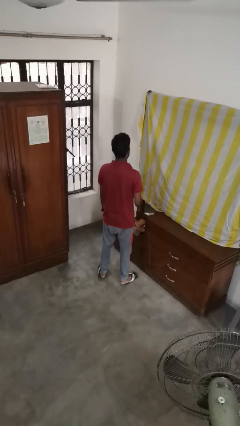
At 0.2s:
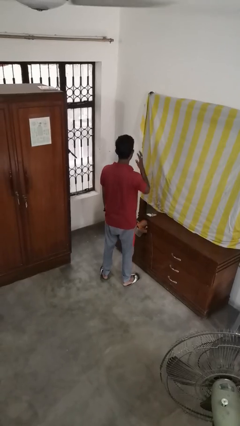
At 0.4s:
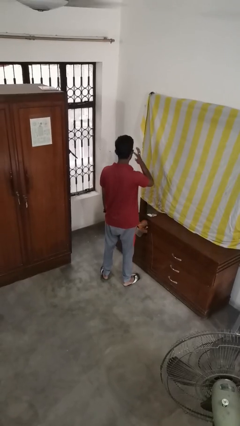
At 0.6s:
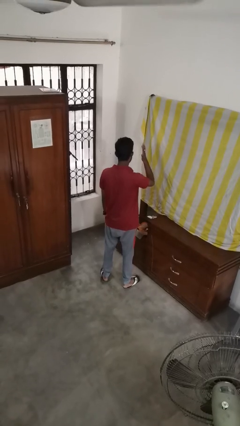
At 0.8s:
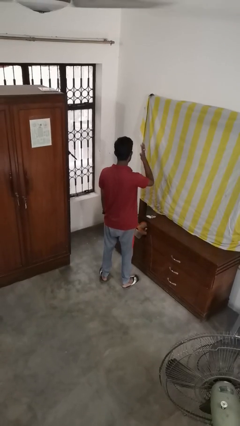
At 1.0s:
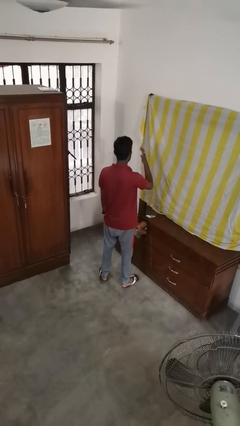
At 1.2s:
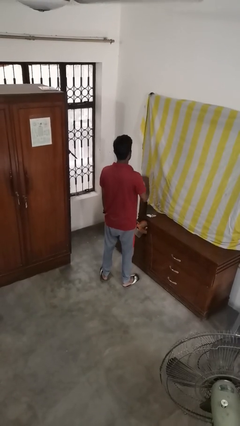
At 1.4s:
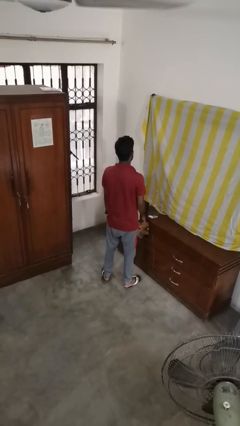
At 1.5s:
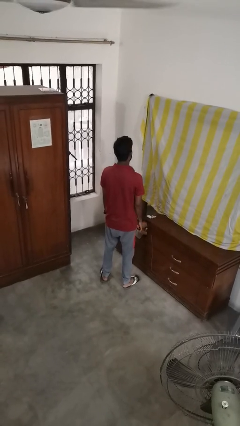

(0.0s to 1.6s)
person puts fingers in ear

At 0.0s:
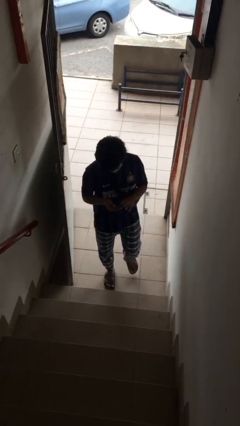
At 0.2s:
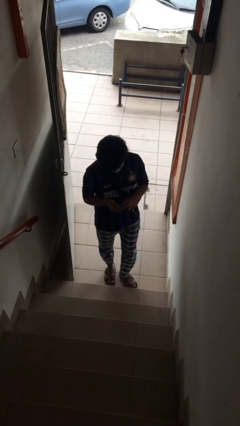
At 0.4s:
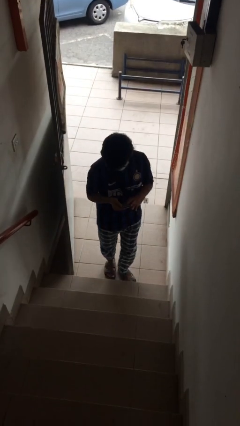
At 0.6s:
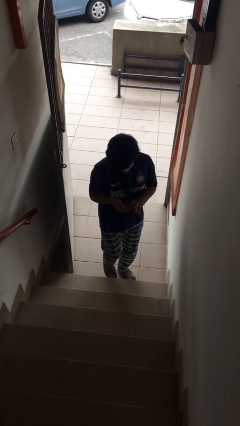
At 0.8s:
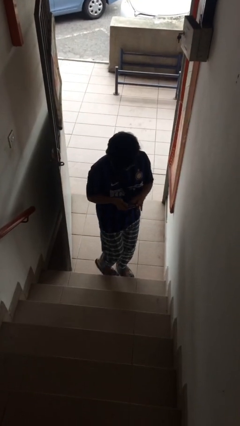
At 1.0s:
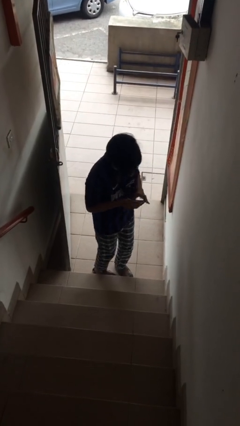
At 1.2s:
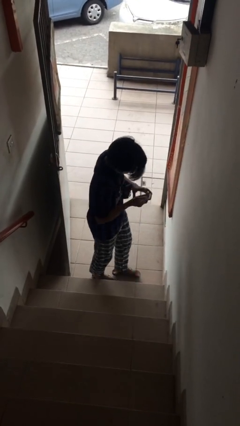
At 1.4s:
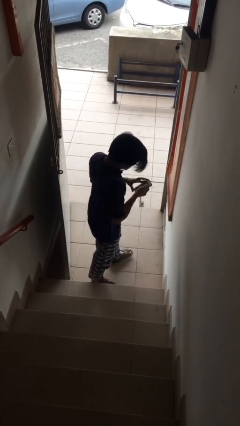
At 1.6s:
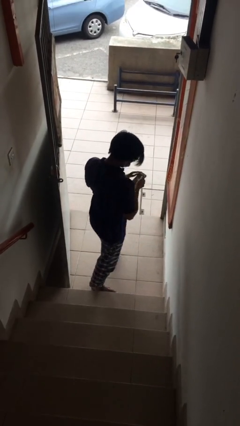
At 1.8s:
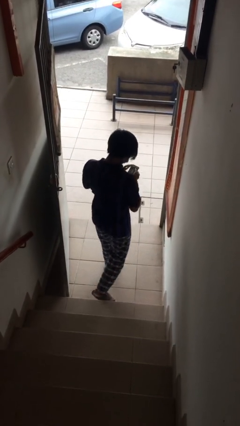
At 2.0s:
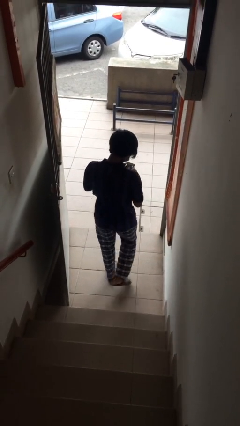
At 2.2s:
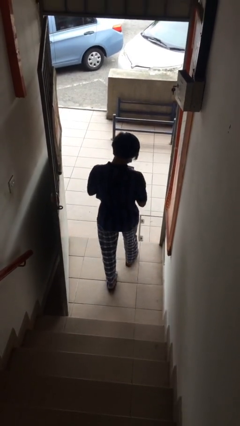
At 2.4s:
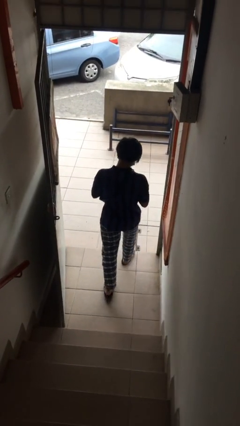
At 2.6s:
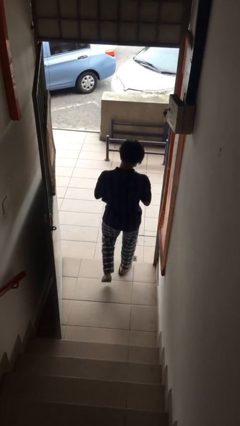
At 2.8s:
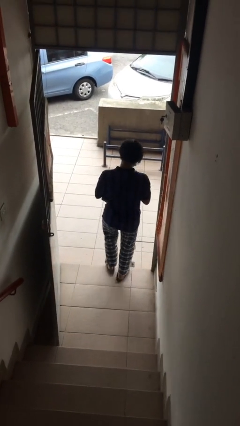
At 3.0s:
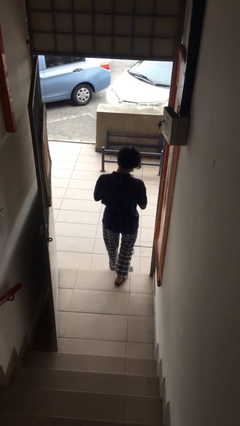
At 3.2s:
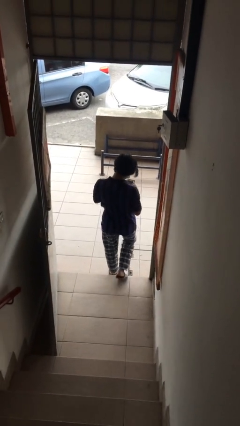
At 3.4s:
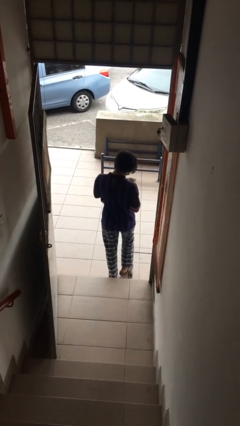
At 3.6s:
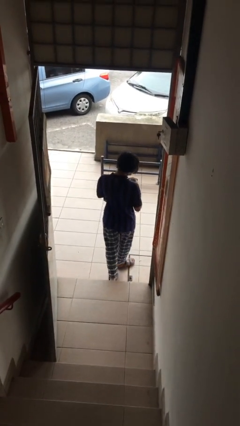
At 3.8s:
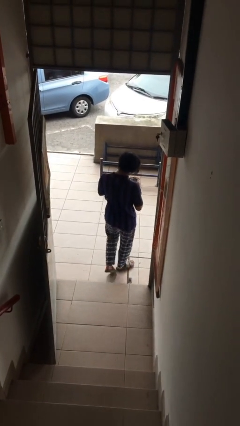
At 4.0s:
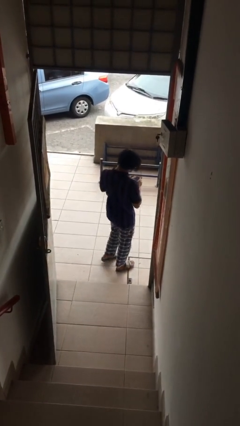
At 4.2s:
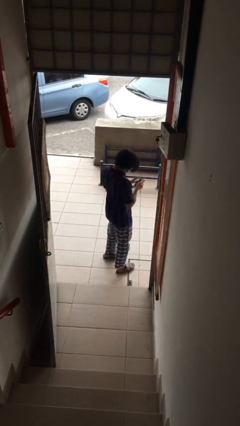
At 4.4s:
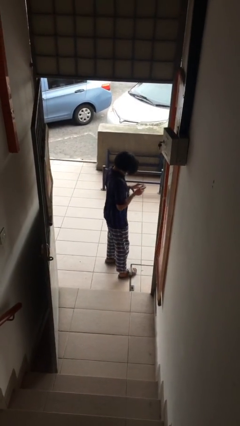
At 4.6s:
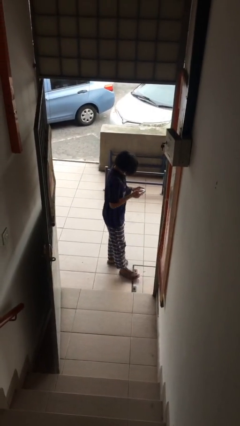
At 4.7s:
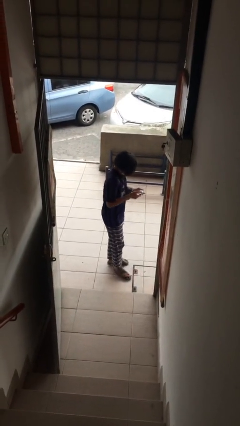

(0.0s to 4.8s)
person exits scene through structure

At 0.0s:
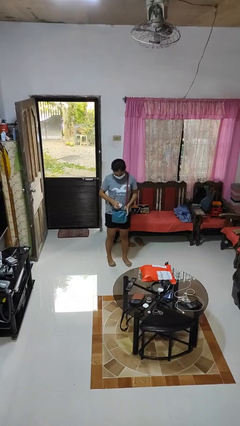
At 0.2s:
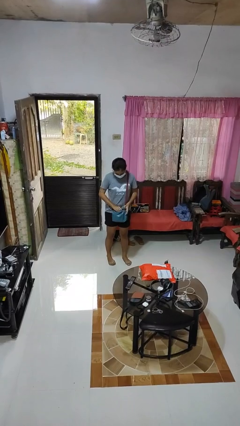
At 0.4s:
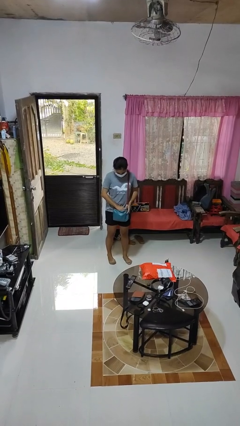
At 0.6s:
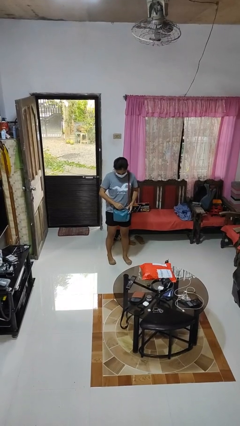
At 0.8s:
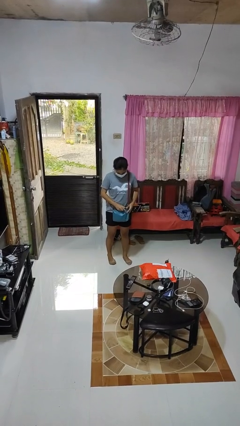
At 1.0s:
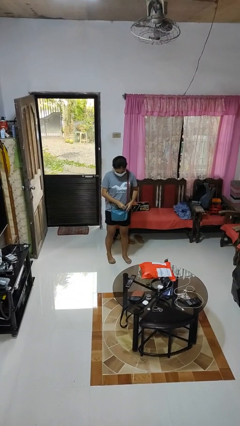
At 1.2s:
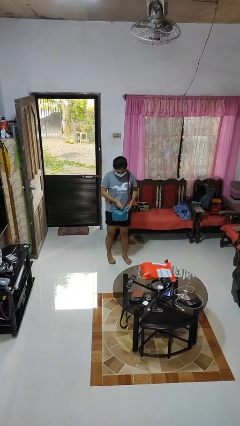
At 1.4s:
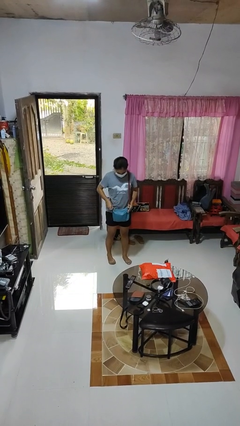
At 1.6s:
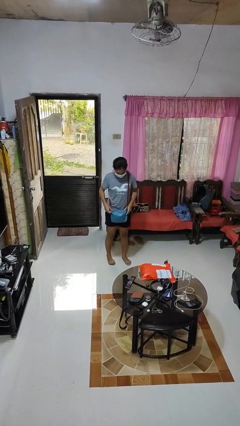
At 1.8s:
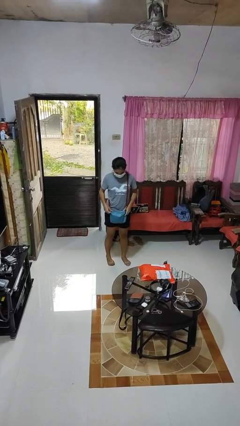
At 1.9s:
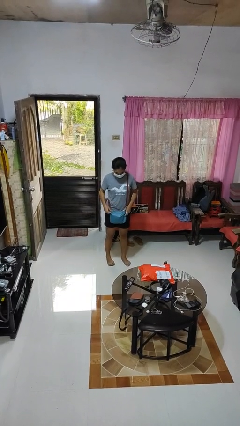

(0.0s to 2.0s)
person puts object into purse

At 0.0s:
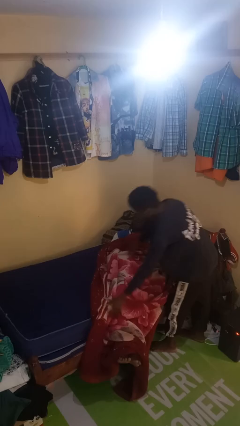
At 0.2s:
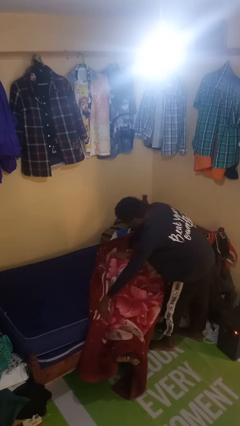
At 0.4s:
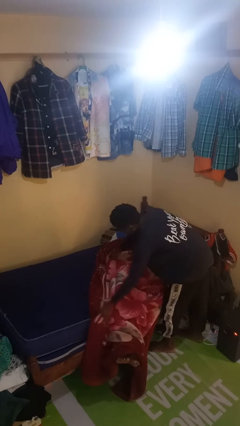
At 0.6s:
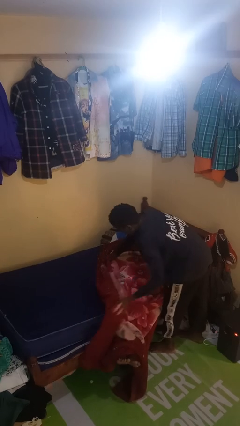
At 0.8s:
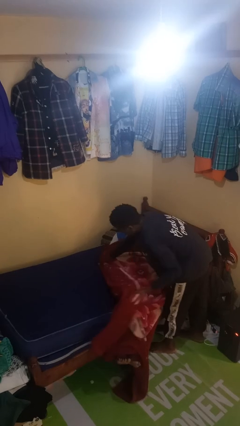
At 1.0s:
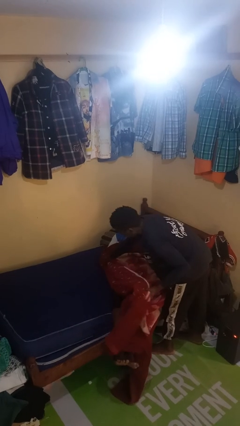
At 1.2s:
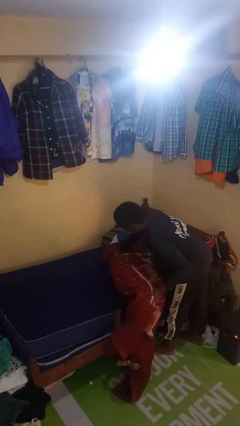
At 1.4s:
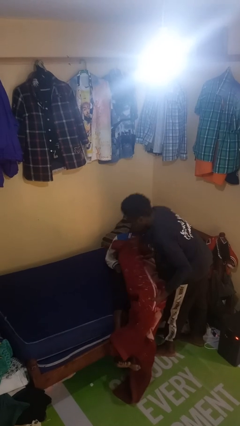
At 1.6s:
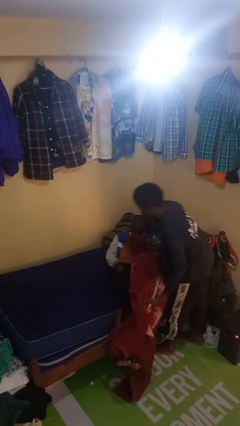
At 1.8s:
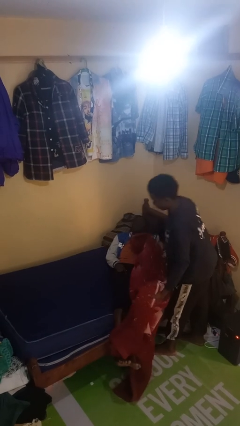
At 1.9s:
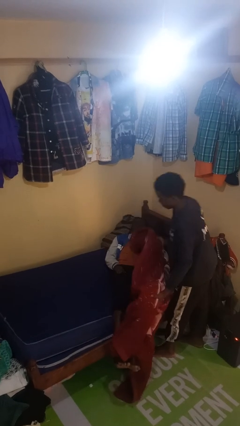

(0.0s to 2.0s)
person uncovers friend with blanket

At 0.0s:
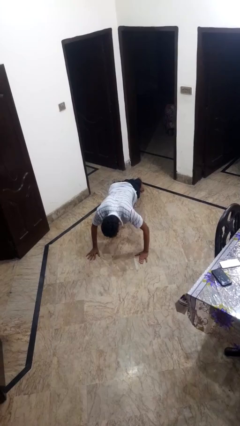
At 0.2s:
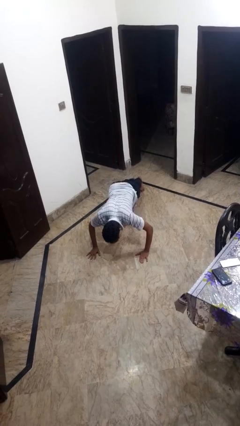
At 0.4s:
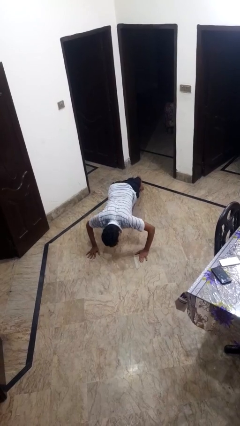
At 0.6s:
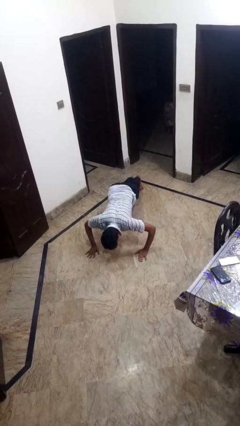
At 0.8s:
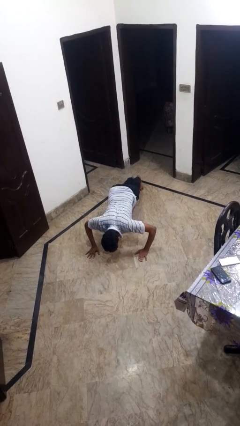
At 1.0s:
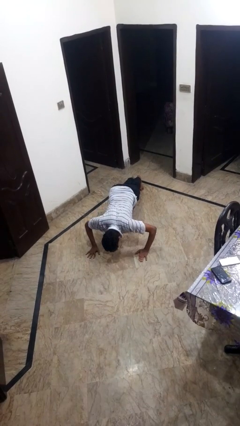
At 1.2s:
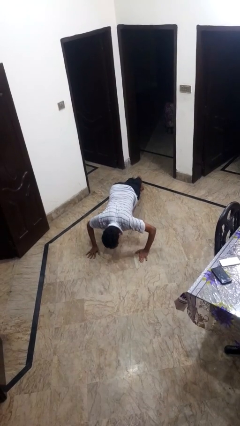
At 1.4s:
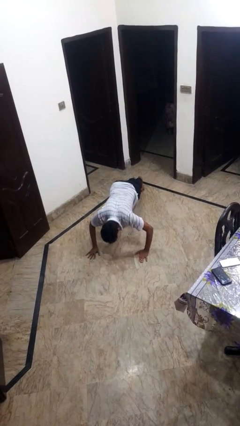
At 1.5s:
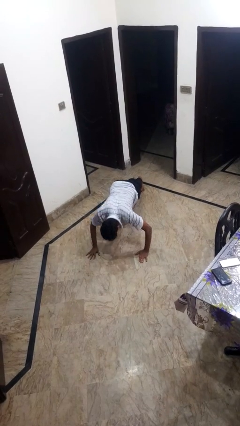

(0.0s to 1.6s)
person exercises with pushup

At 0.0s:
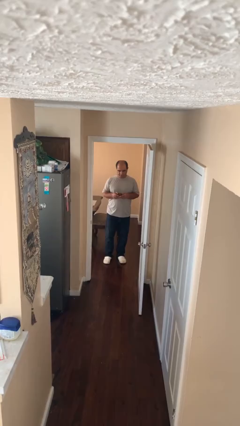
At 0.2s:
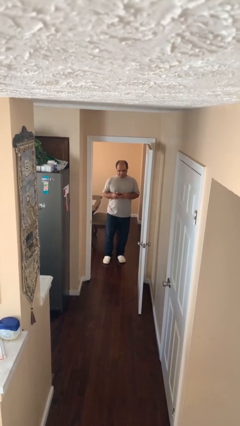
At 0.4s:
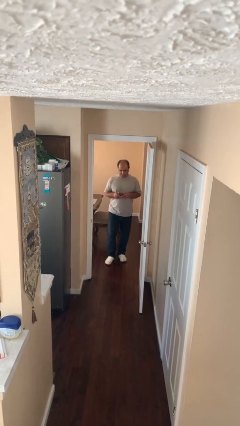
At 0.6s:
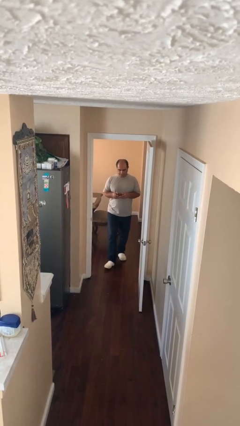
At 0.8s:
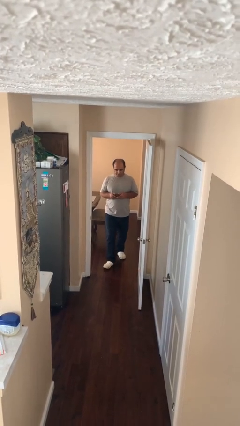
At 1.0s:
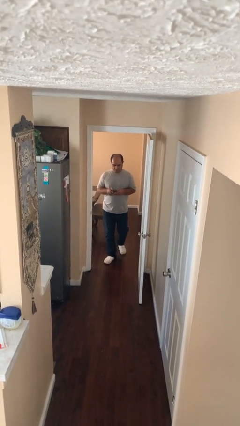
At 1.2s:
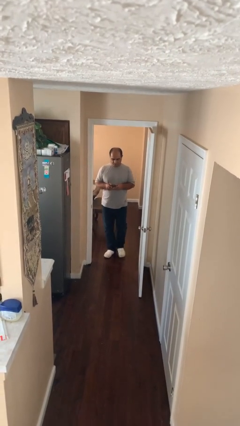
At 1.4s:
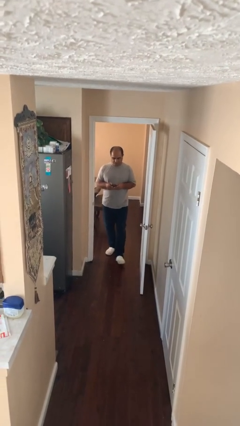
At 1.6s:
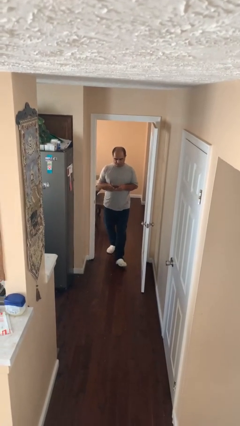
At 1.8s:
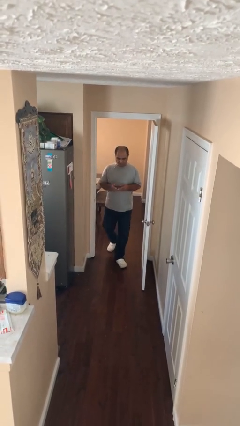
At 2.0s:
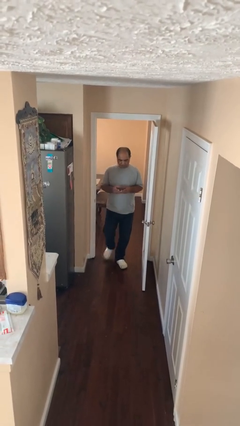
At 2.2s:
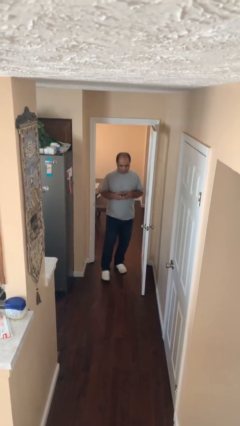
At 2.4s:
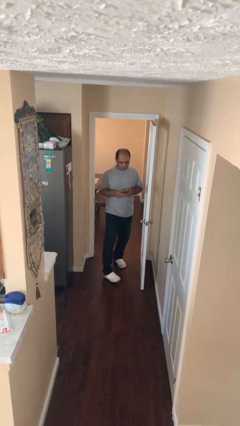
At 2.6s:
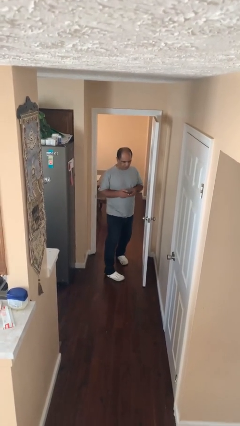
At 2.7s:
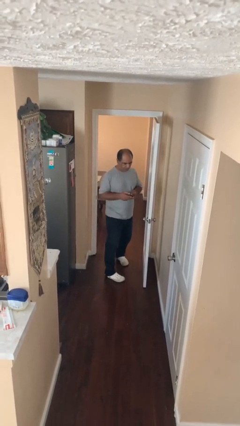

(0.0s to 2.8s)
person enters scene through structure

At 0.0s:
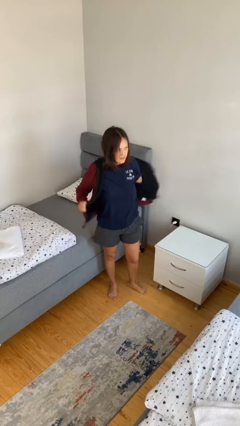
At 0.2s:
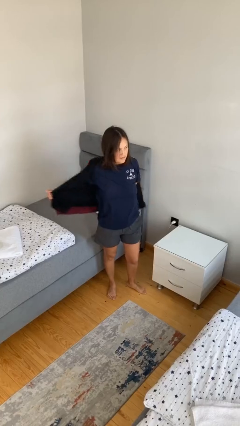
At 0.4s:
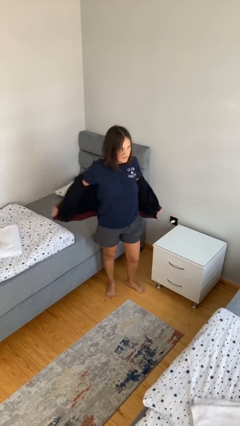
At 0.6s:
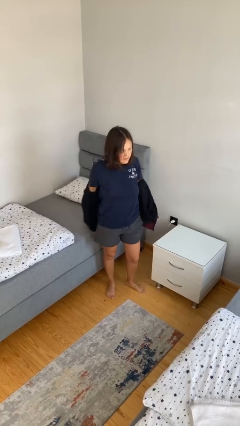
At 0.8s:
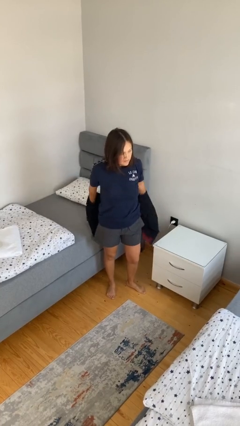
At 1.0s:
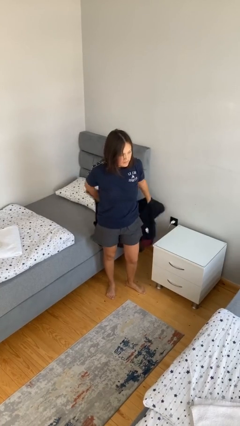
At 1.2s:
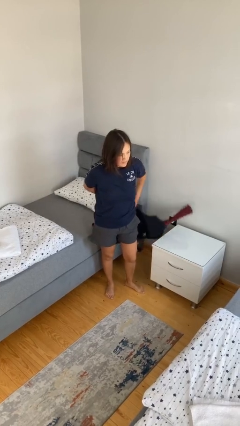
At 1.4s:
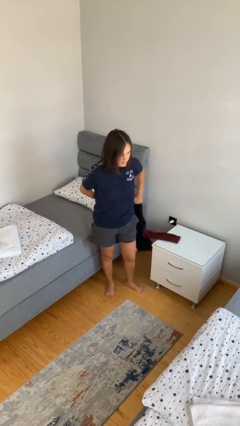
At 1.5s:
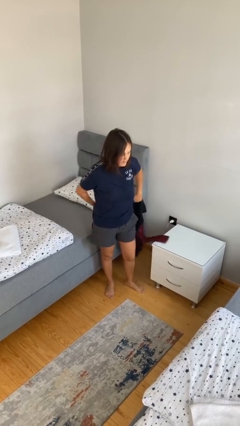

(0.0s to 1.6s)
person takes off jacket

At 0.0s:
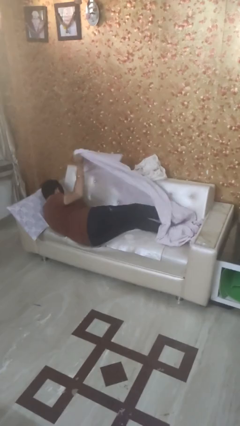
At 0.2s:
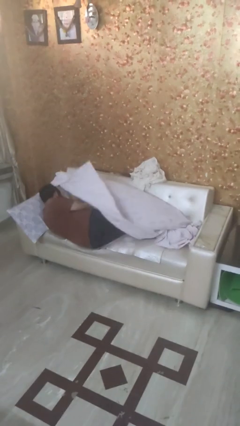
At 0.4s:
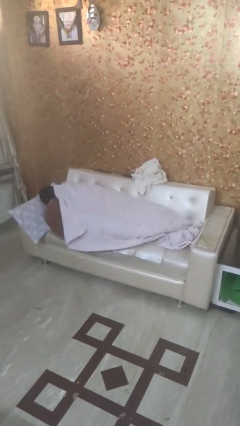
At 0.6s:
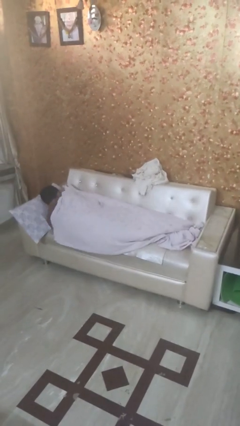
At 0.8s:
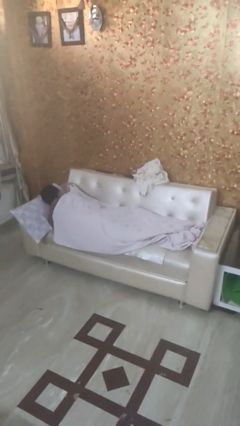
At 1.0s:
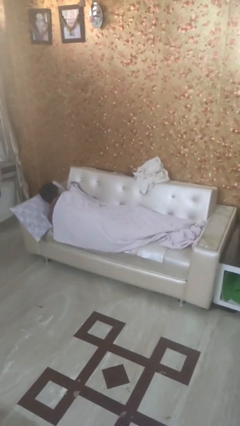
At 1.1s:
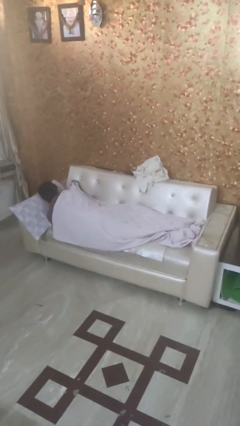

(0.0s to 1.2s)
person covers with bedsheets
